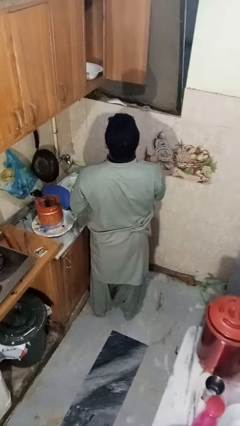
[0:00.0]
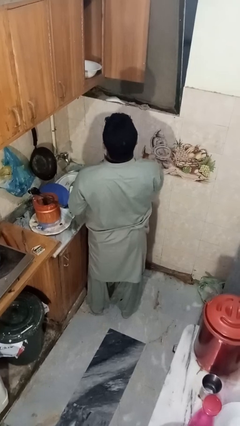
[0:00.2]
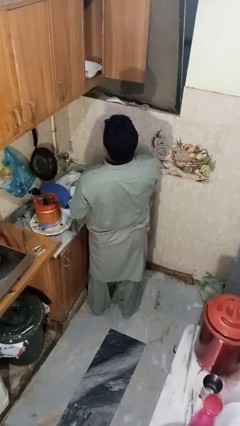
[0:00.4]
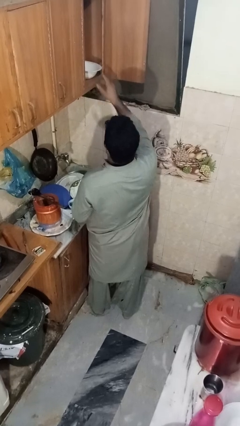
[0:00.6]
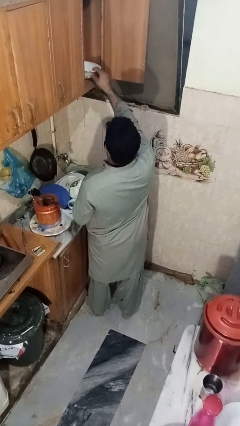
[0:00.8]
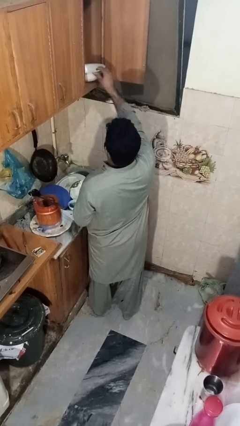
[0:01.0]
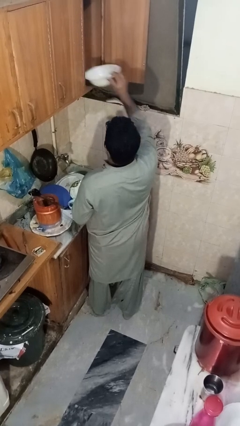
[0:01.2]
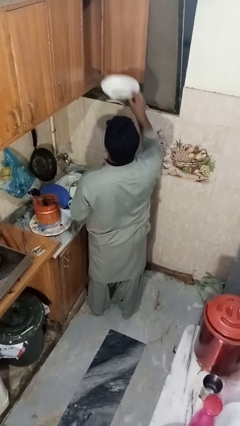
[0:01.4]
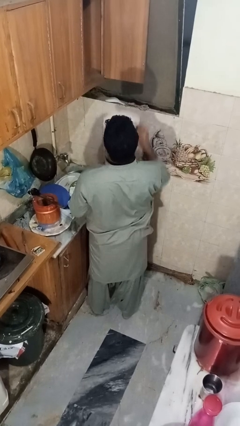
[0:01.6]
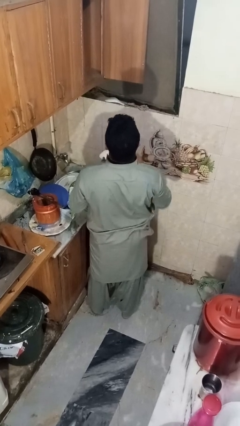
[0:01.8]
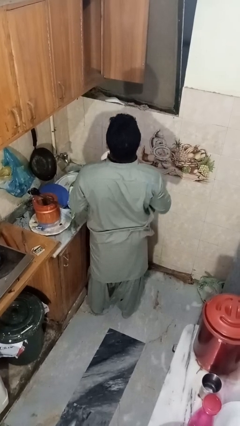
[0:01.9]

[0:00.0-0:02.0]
person takes object from cabinet

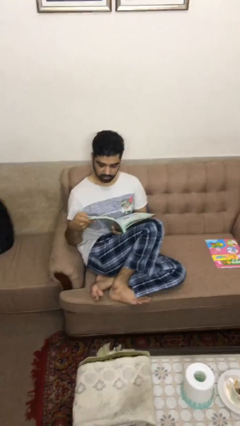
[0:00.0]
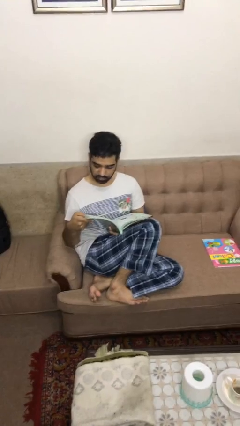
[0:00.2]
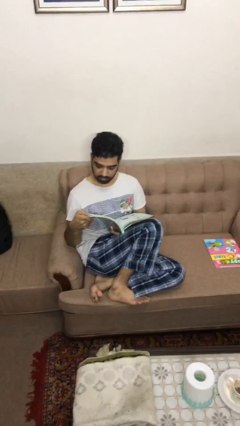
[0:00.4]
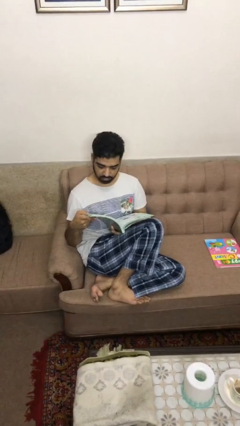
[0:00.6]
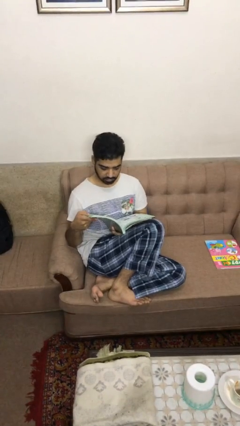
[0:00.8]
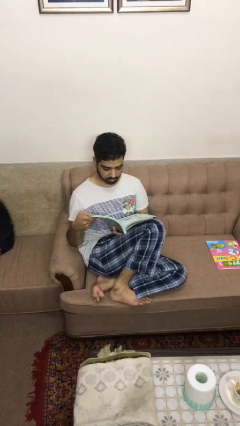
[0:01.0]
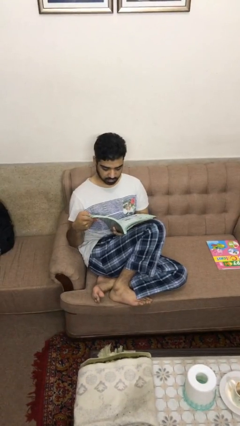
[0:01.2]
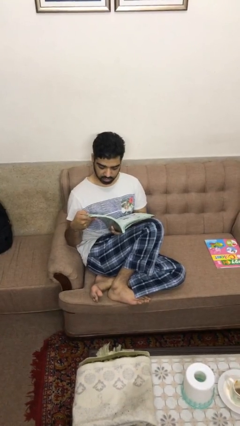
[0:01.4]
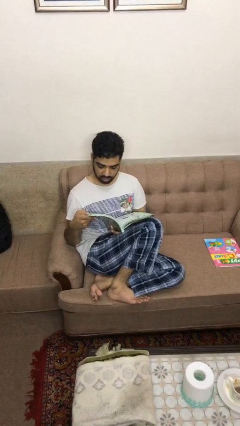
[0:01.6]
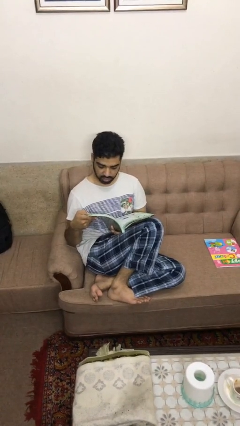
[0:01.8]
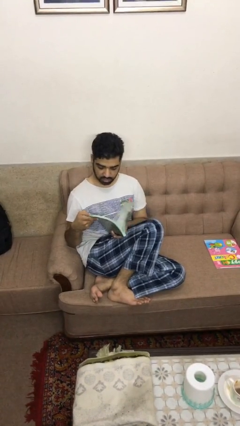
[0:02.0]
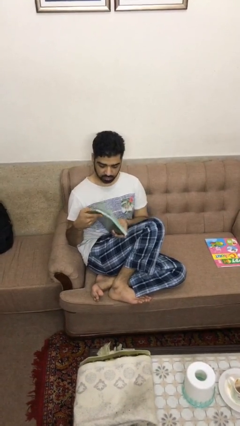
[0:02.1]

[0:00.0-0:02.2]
person reads book

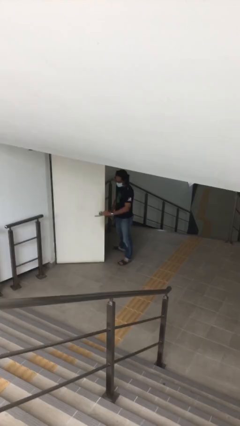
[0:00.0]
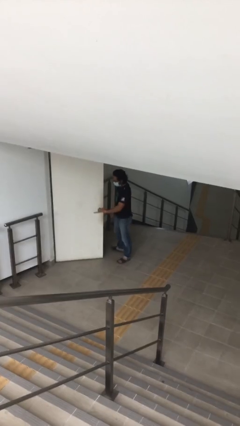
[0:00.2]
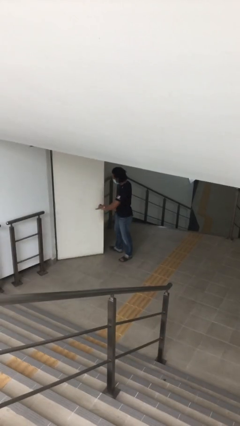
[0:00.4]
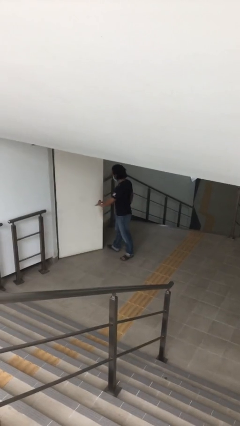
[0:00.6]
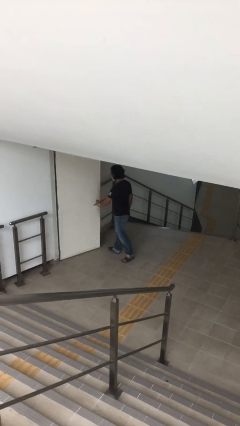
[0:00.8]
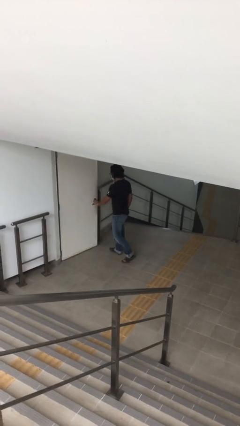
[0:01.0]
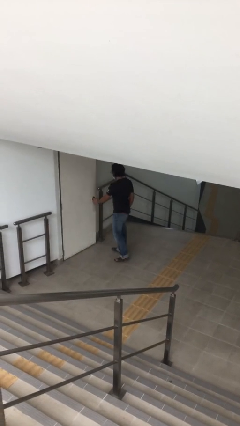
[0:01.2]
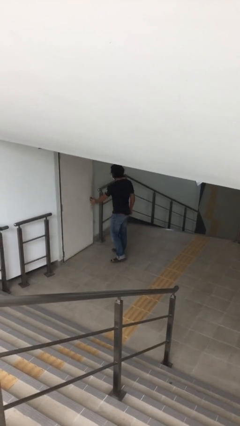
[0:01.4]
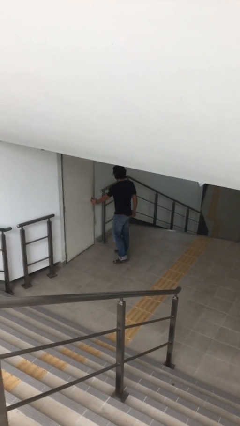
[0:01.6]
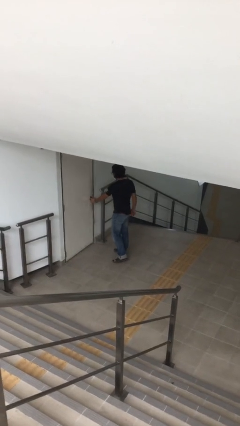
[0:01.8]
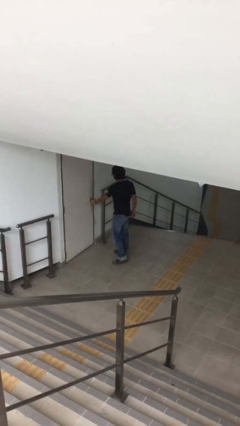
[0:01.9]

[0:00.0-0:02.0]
person closes facility door

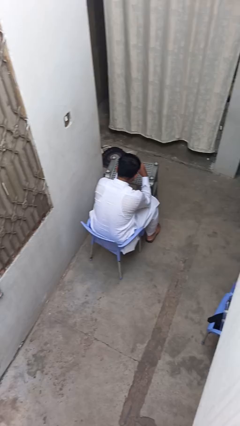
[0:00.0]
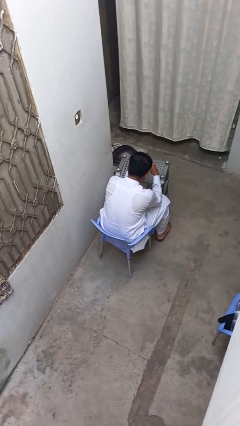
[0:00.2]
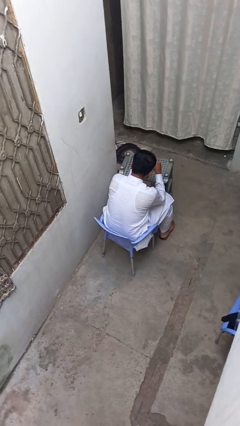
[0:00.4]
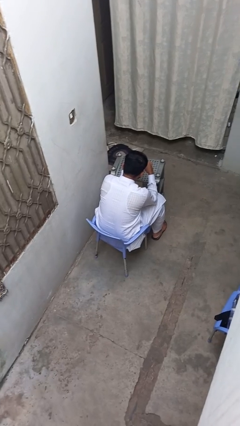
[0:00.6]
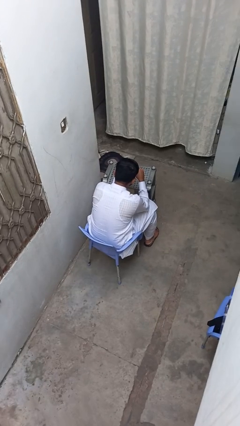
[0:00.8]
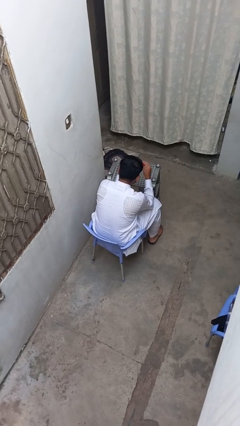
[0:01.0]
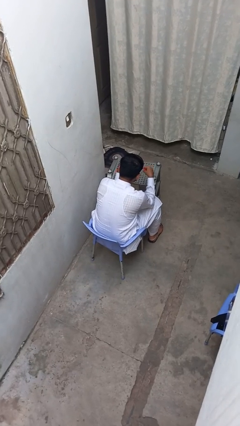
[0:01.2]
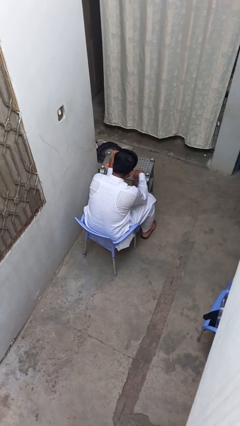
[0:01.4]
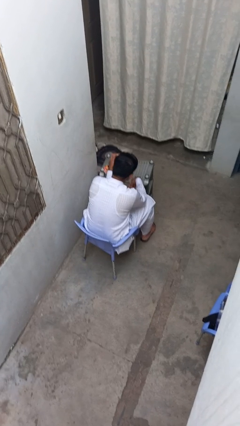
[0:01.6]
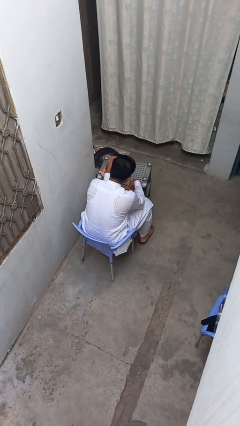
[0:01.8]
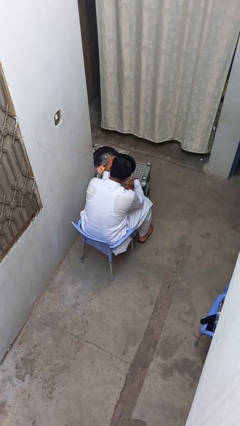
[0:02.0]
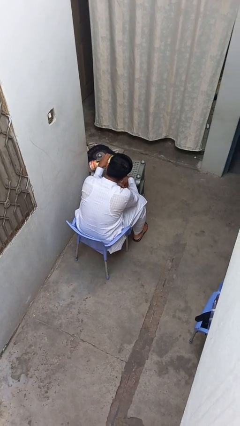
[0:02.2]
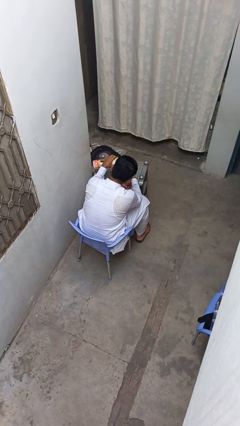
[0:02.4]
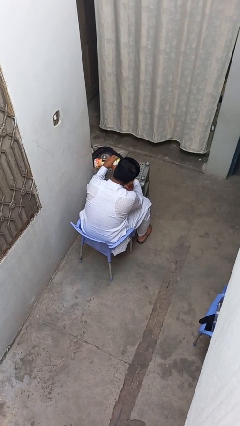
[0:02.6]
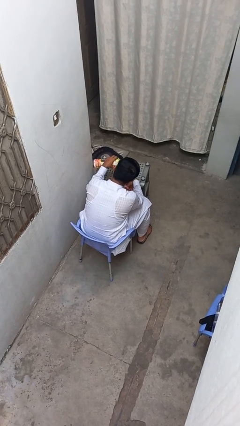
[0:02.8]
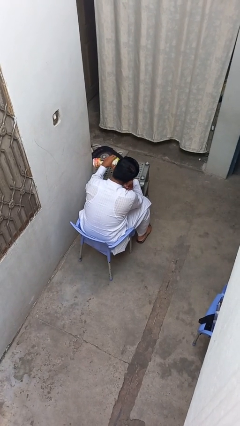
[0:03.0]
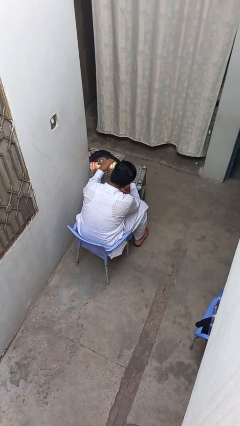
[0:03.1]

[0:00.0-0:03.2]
person unscrews lid from bottle

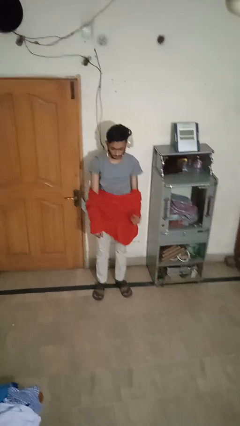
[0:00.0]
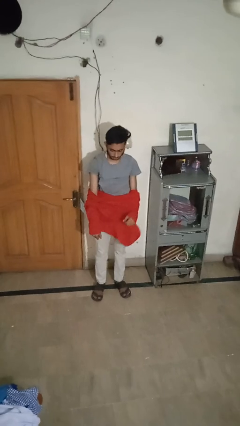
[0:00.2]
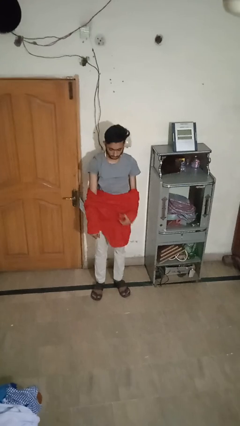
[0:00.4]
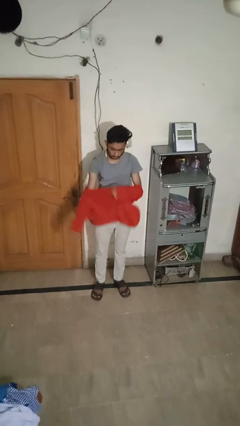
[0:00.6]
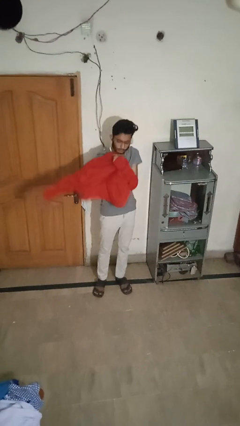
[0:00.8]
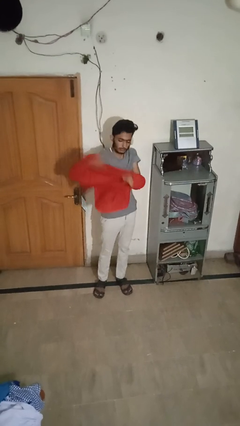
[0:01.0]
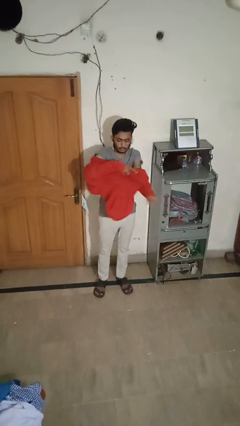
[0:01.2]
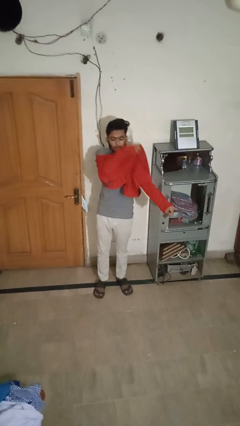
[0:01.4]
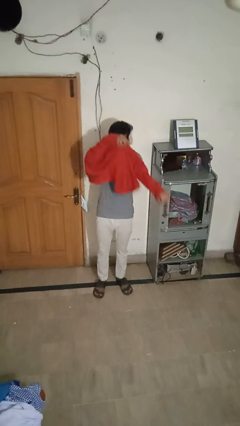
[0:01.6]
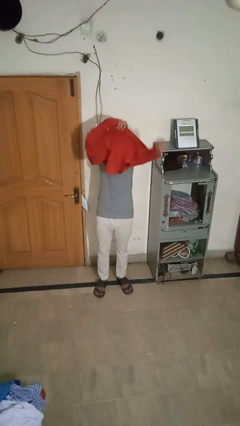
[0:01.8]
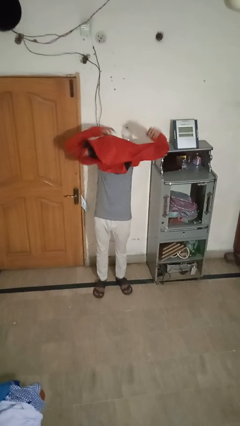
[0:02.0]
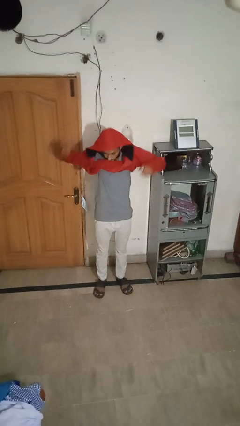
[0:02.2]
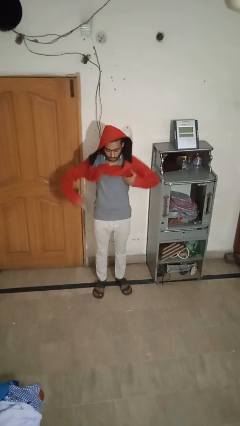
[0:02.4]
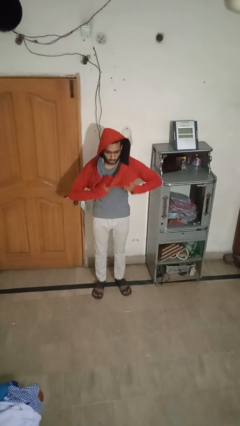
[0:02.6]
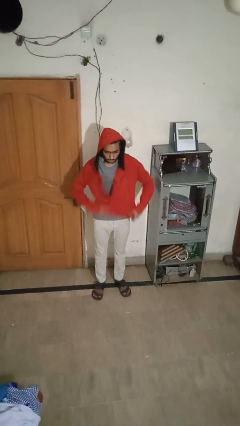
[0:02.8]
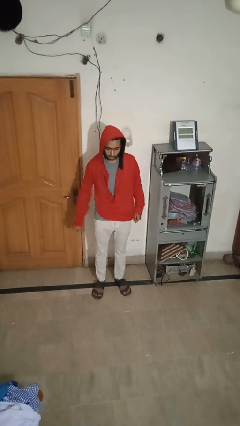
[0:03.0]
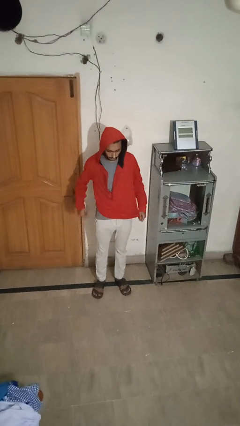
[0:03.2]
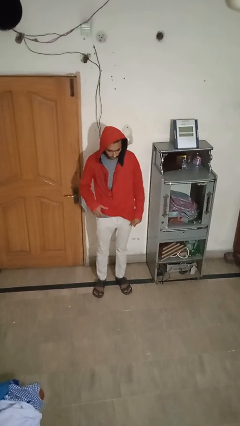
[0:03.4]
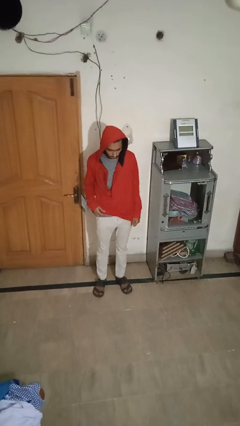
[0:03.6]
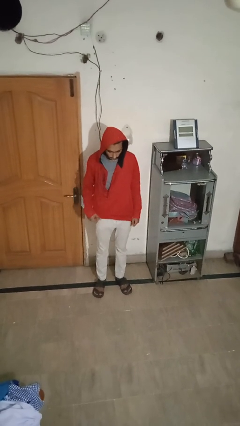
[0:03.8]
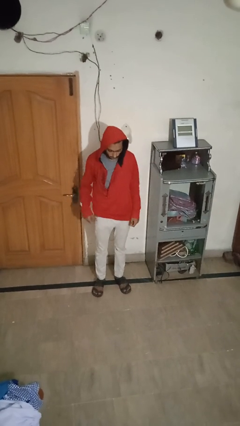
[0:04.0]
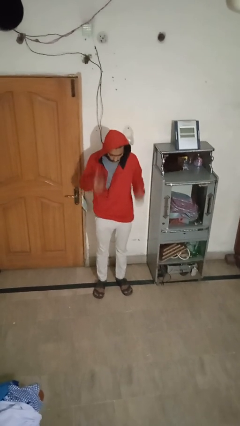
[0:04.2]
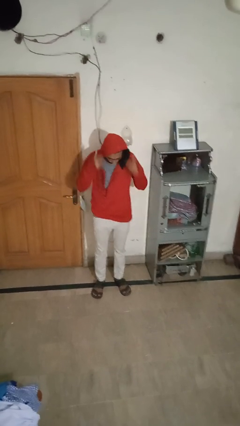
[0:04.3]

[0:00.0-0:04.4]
person puts on hoodie

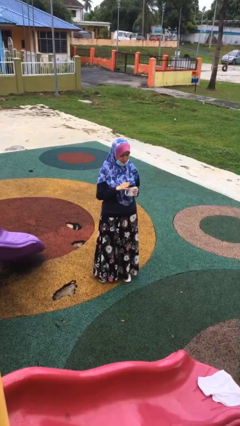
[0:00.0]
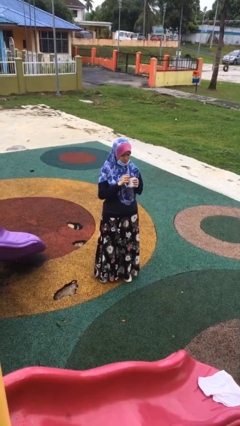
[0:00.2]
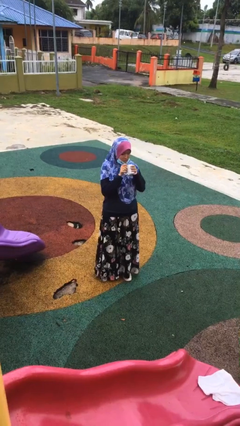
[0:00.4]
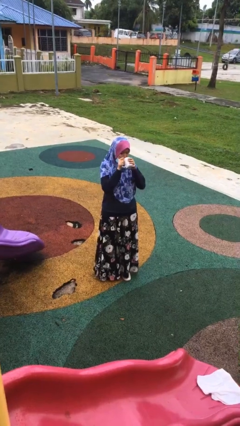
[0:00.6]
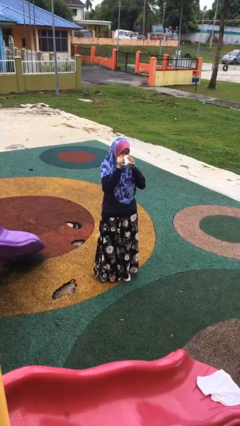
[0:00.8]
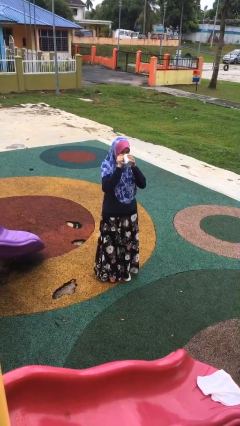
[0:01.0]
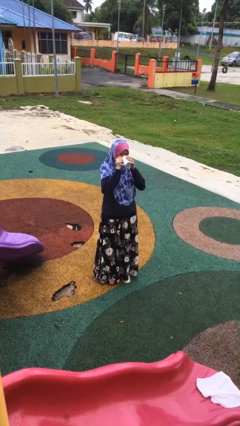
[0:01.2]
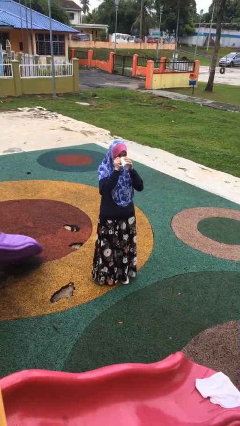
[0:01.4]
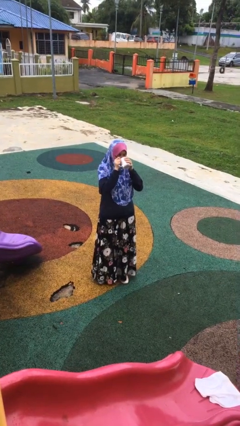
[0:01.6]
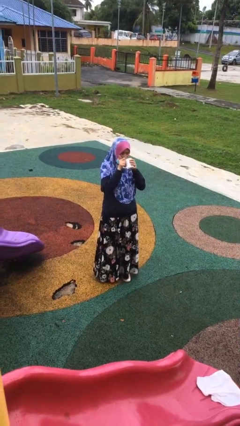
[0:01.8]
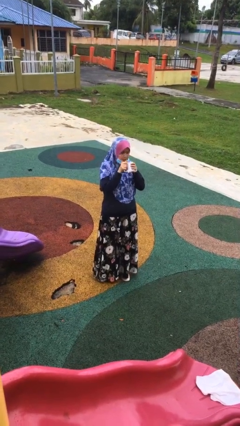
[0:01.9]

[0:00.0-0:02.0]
person drinks from mug

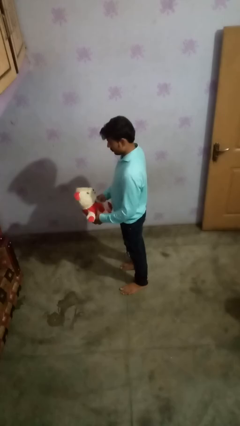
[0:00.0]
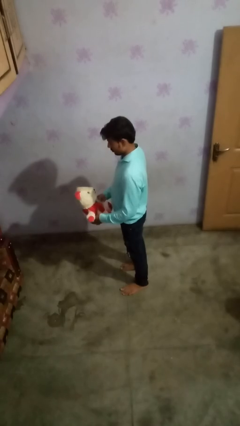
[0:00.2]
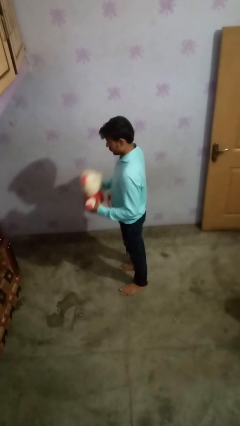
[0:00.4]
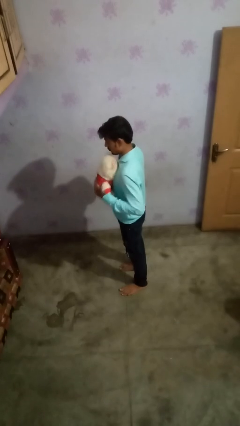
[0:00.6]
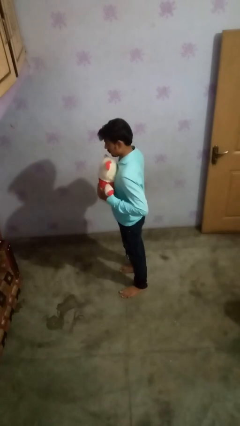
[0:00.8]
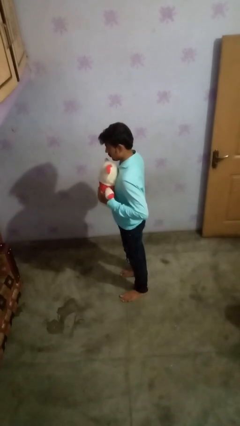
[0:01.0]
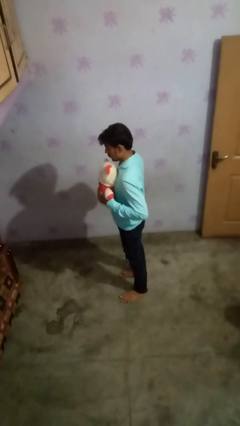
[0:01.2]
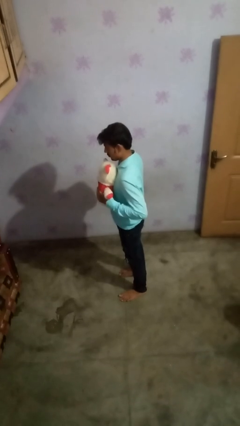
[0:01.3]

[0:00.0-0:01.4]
person hugs stuffed animal
